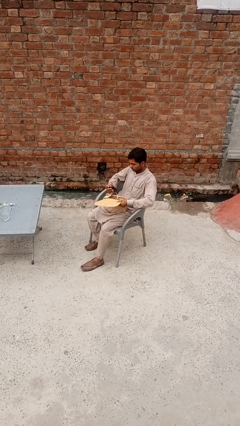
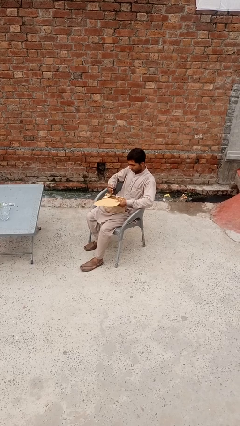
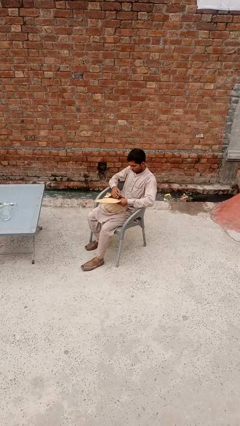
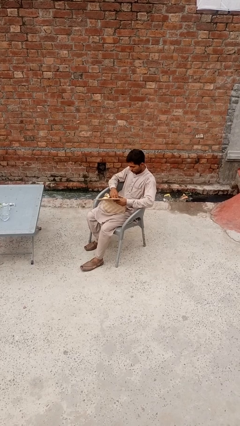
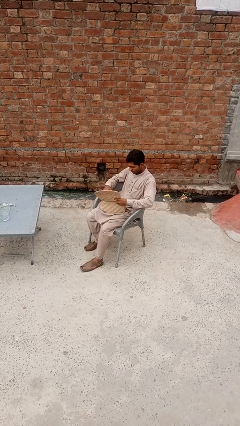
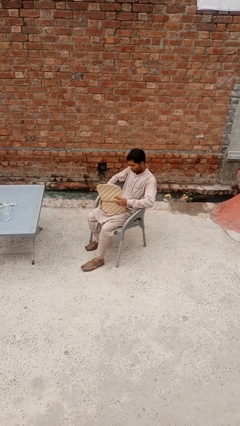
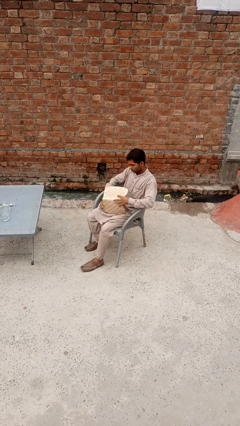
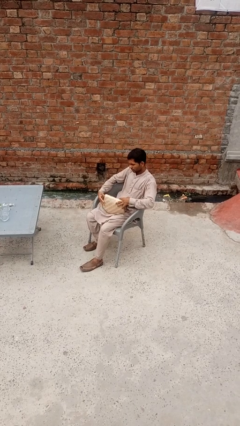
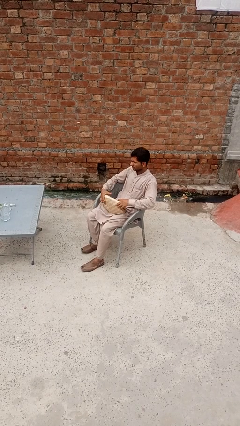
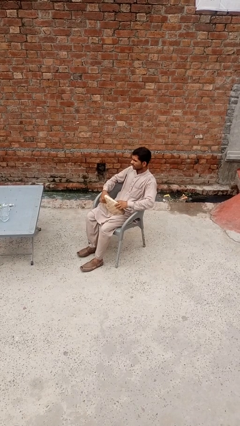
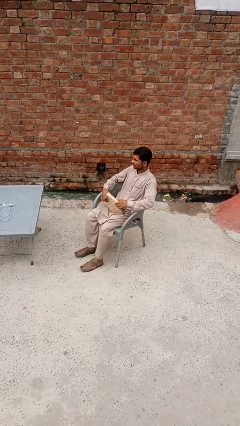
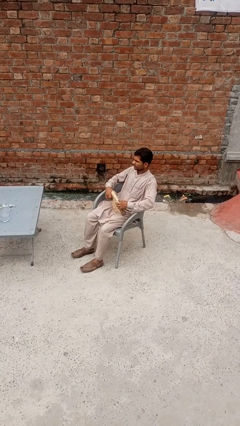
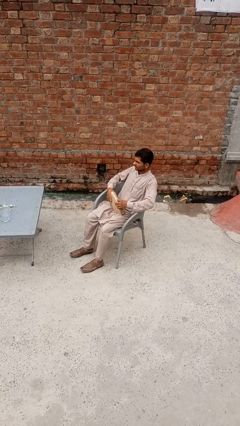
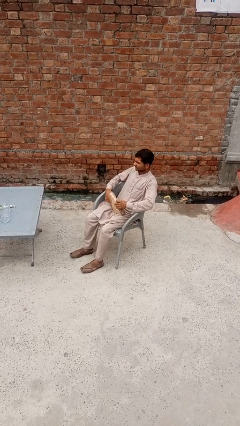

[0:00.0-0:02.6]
person puts object into purse

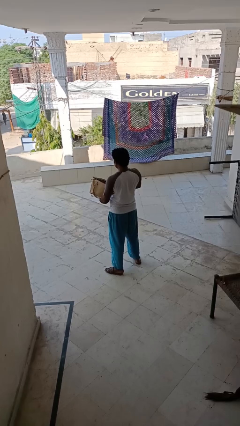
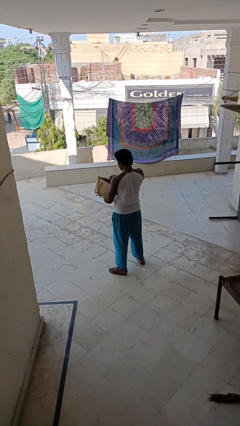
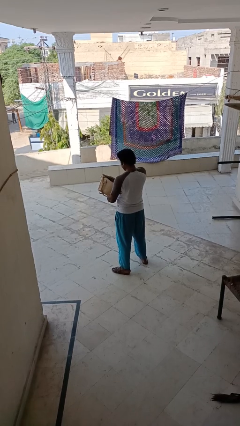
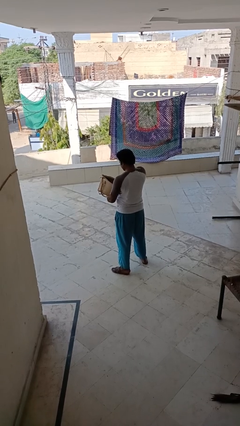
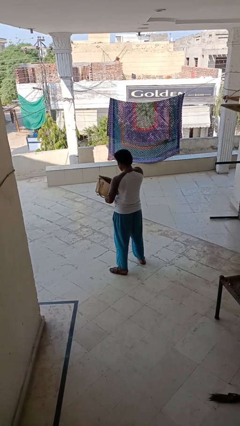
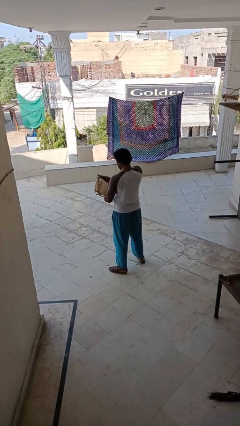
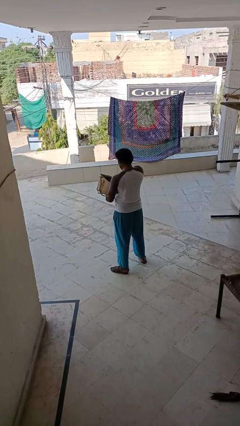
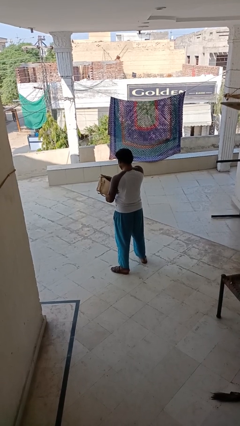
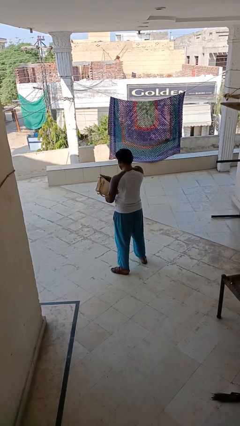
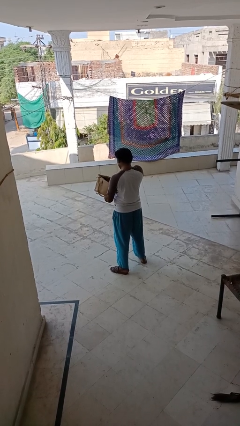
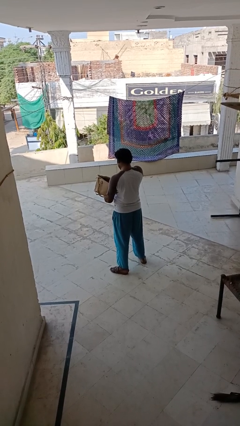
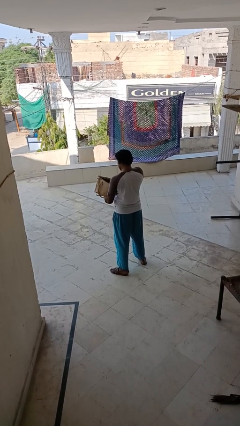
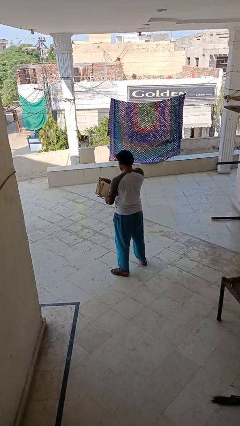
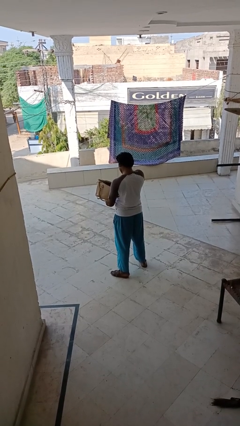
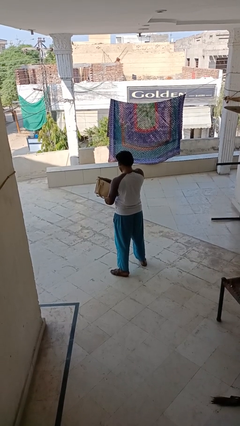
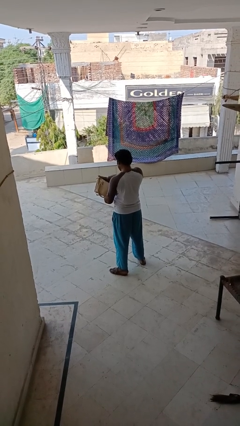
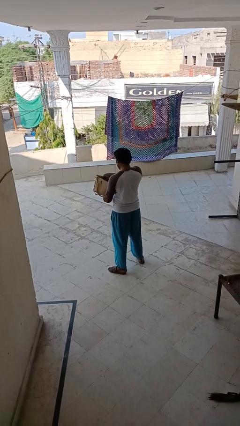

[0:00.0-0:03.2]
person searches in purse

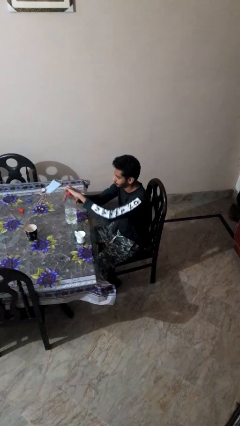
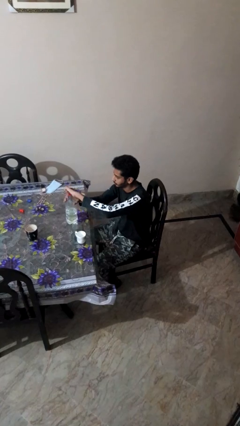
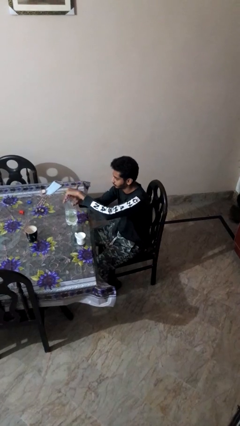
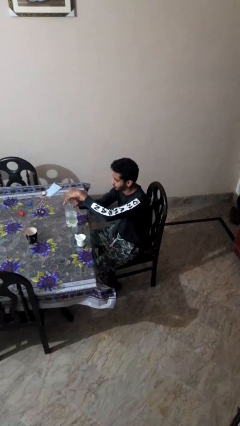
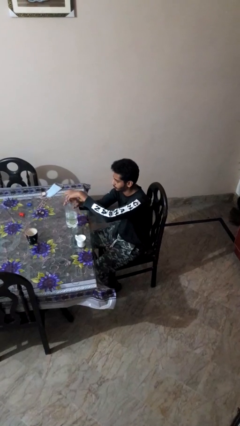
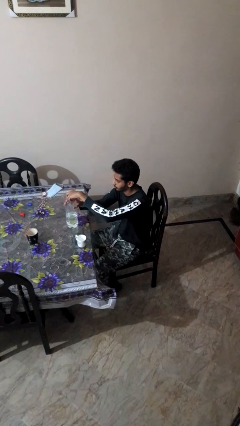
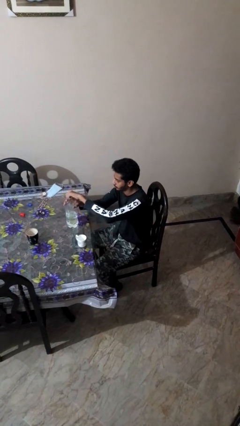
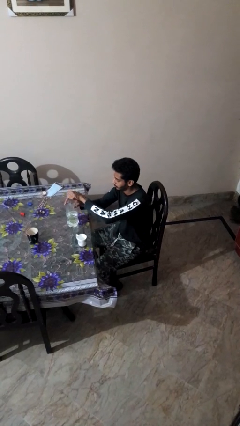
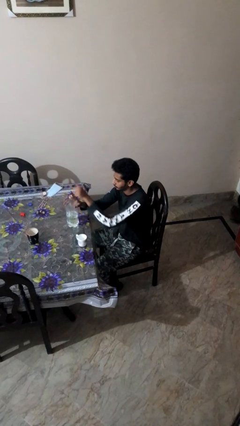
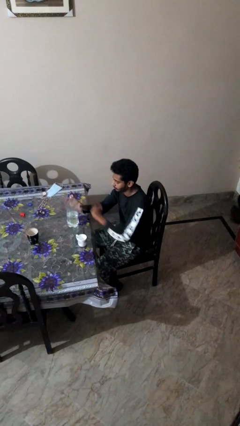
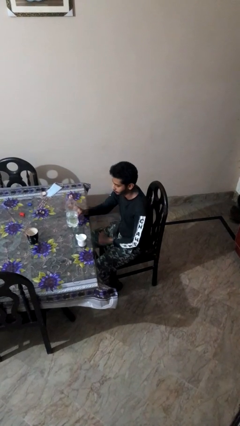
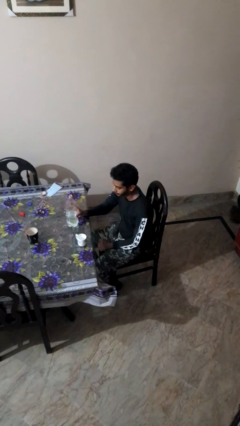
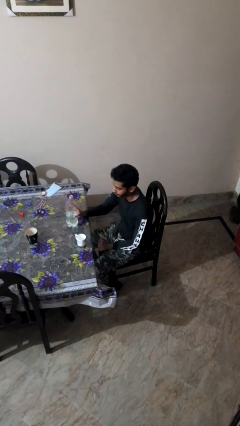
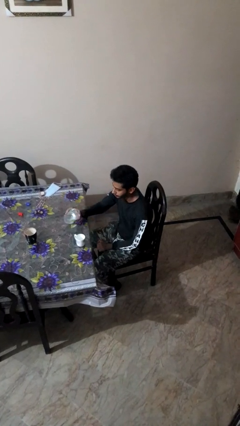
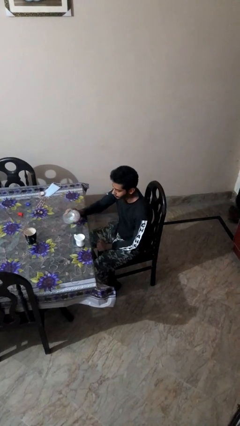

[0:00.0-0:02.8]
person unscrews lid from bottle

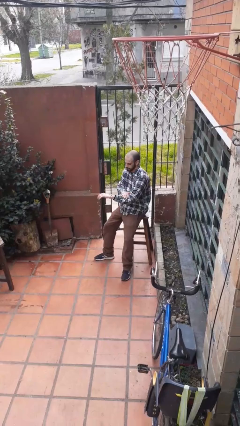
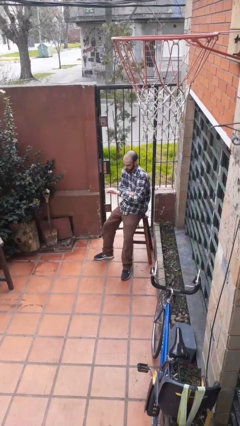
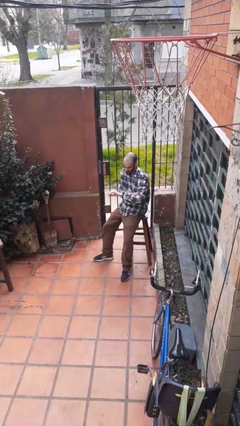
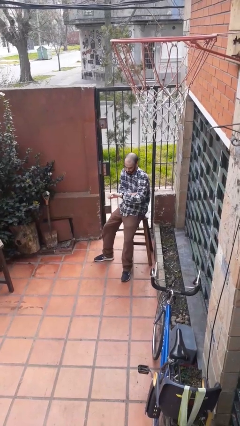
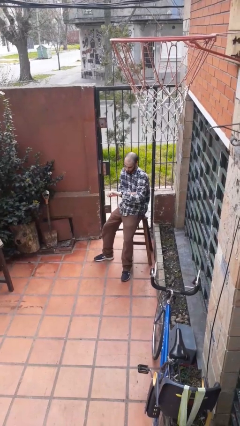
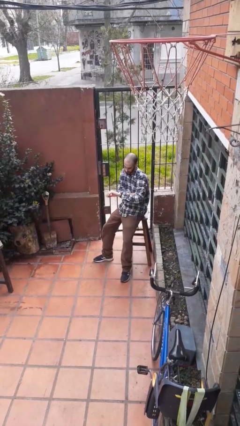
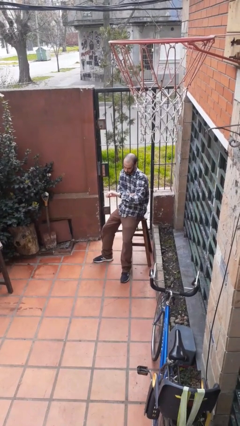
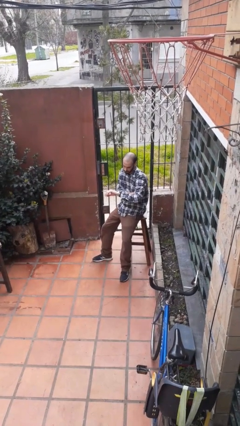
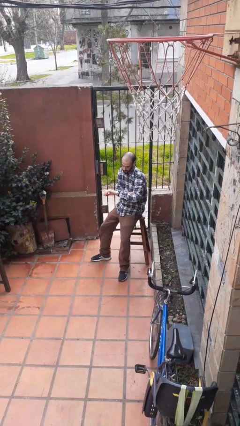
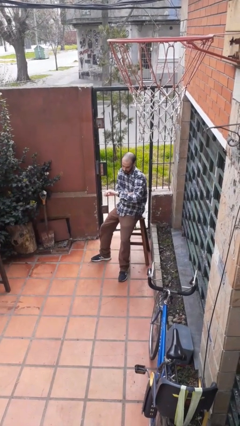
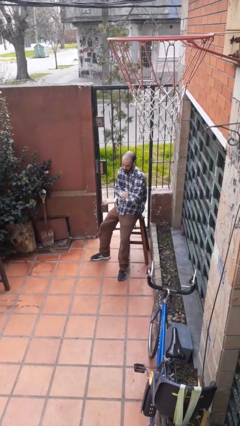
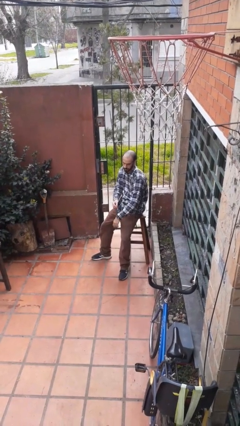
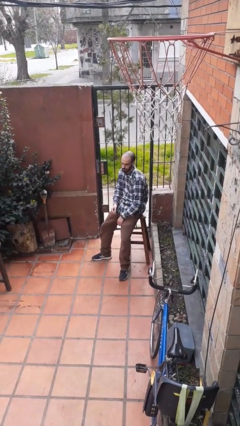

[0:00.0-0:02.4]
person looks at wristwatch

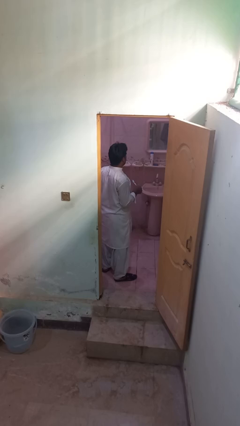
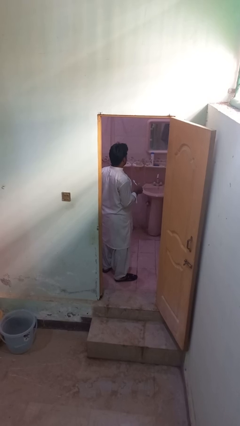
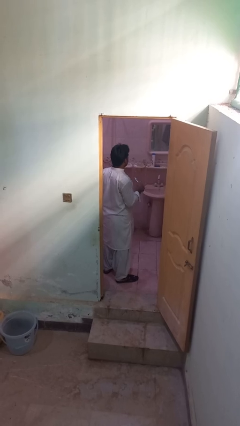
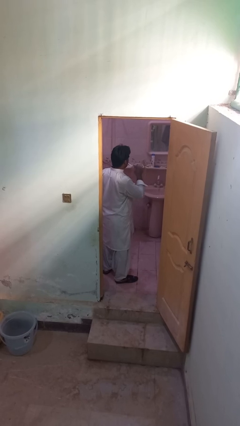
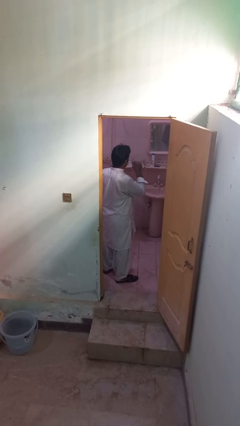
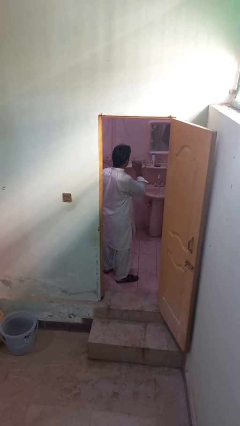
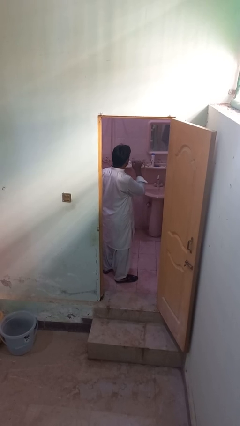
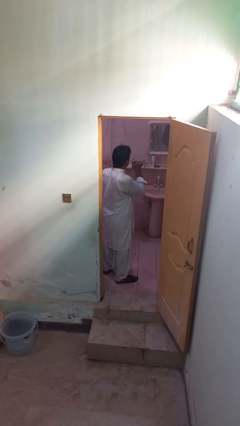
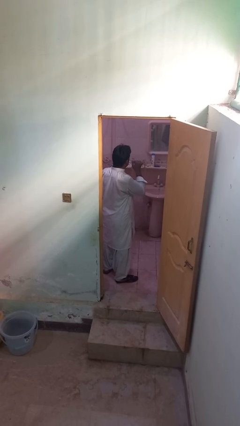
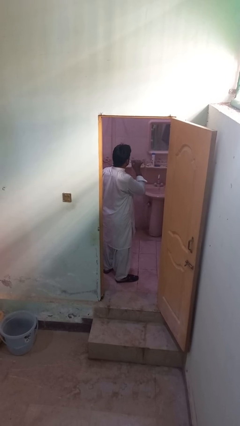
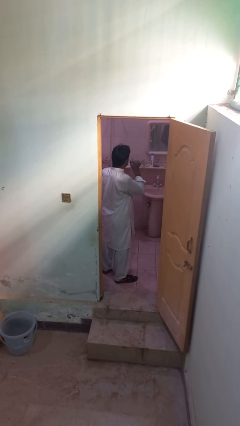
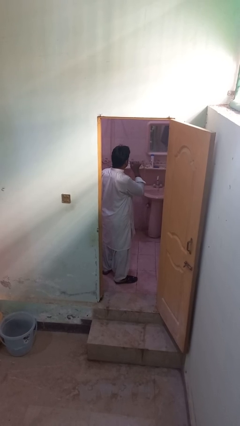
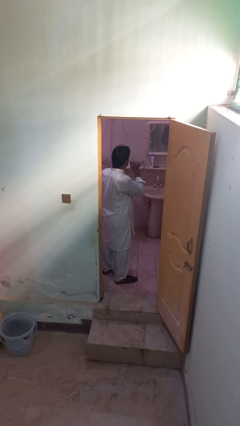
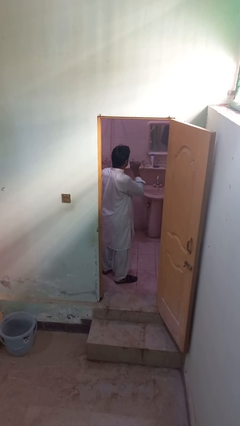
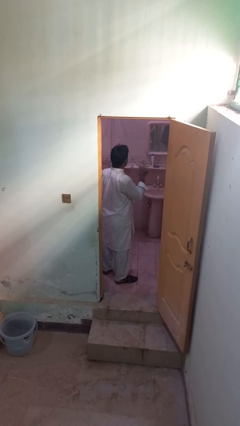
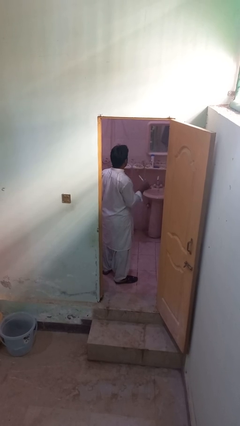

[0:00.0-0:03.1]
person brushes teeth

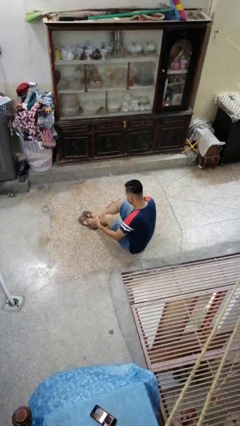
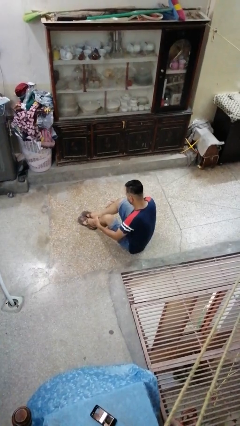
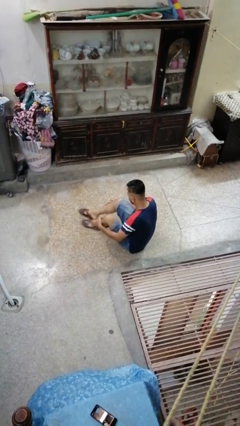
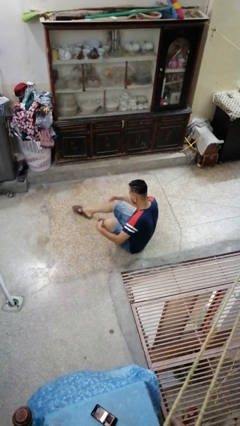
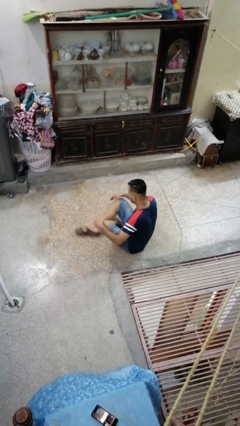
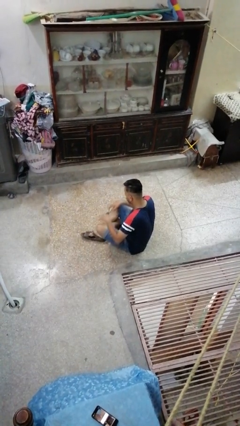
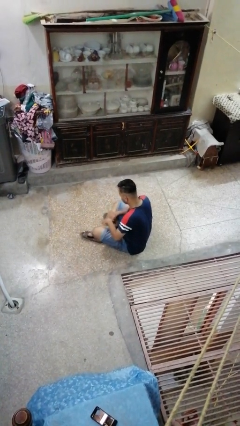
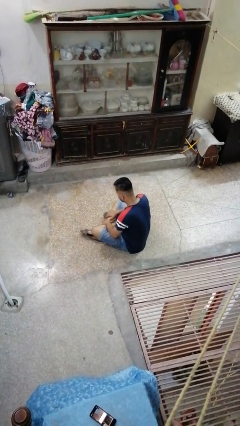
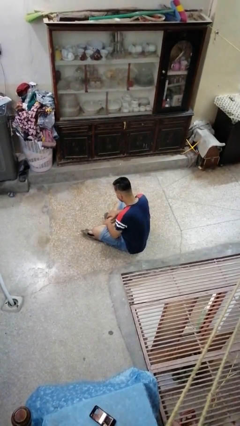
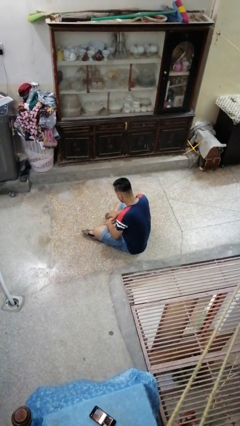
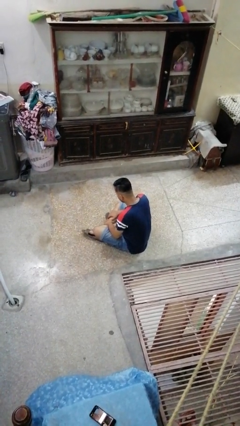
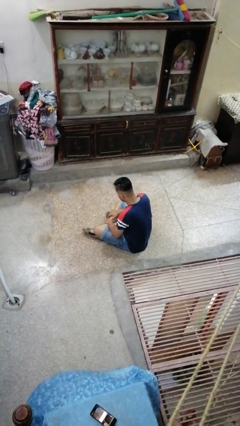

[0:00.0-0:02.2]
person crosses legs

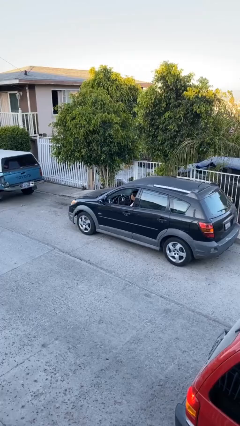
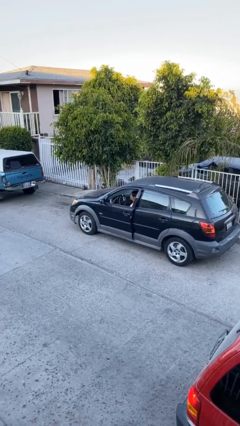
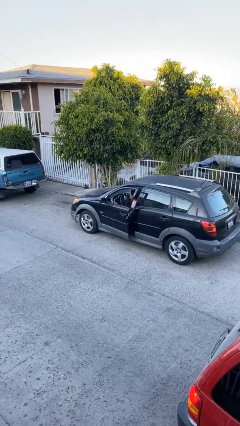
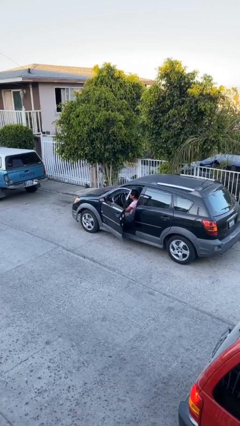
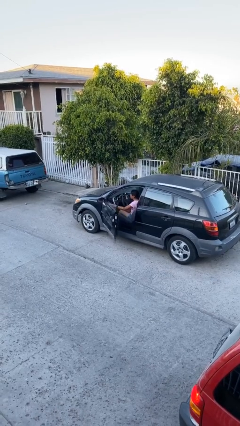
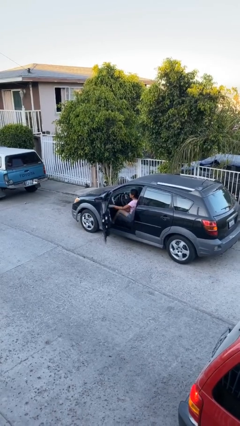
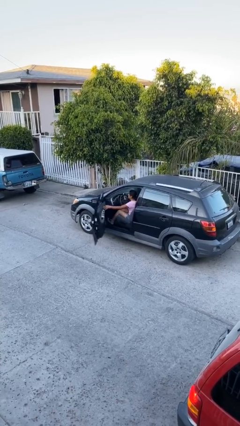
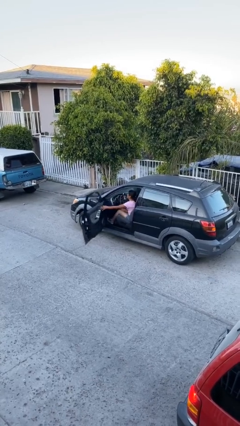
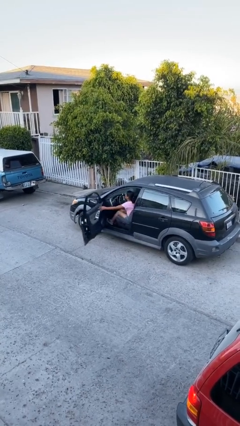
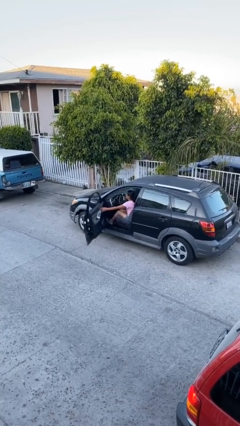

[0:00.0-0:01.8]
person opens car door
